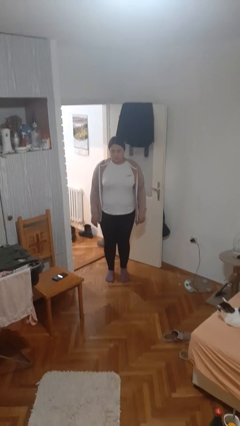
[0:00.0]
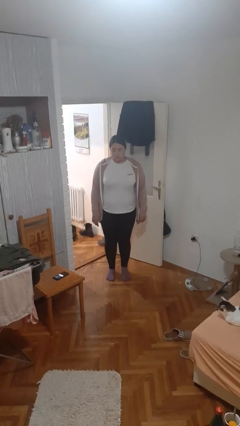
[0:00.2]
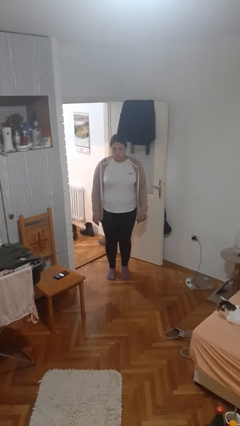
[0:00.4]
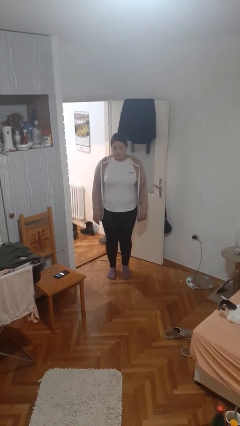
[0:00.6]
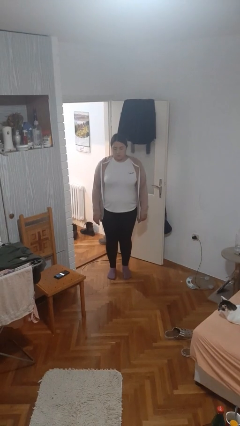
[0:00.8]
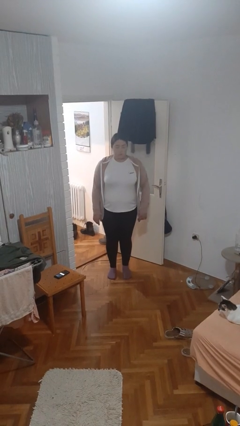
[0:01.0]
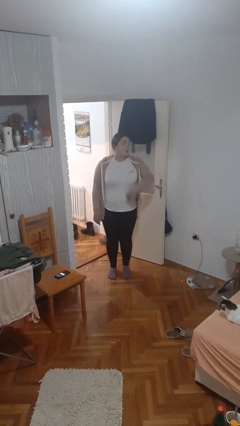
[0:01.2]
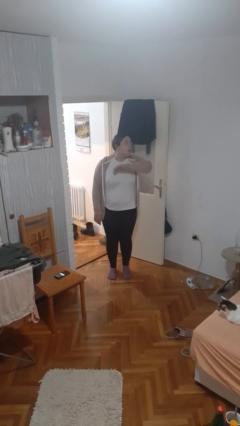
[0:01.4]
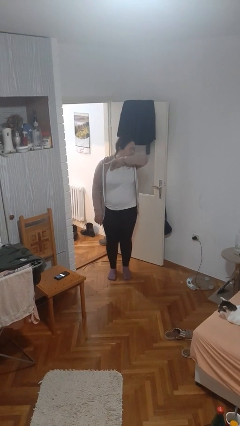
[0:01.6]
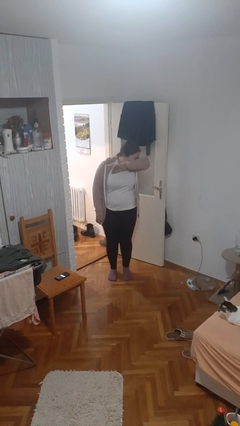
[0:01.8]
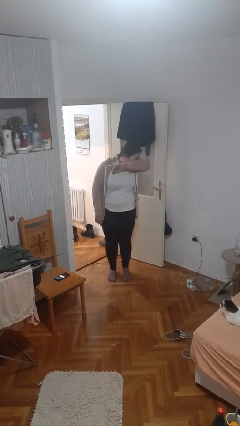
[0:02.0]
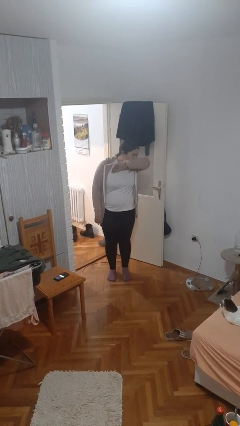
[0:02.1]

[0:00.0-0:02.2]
person sneezes into arm

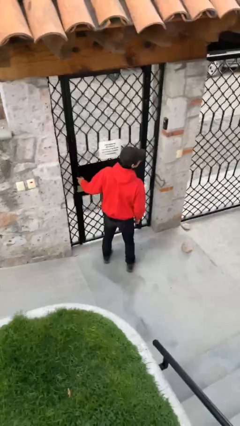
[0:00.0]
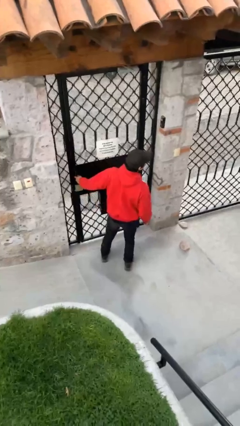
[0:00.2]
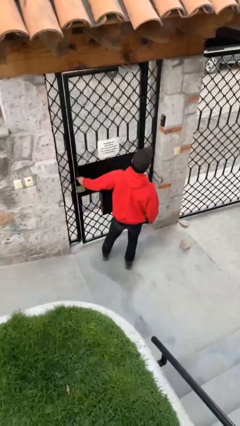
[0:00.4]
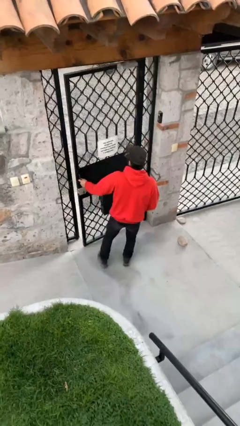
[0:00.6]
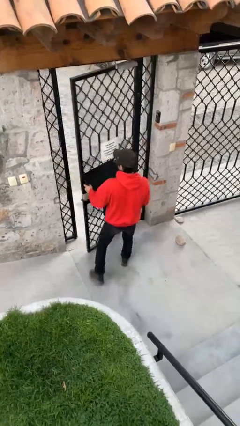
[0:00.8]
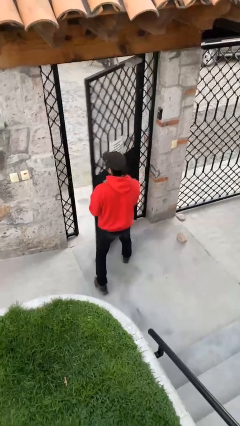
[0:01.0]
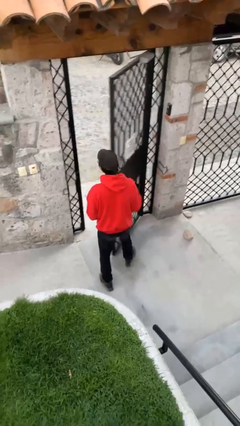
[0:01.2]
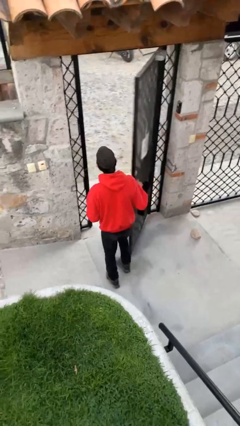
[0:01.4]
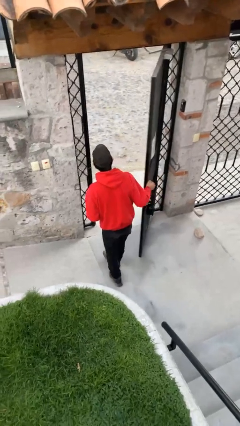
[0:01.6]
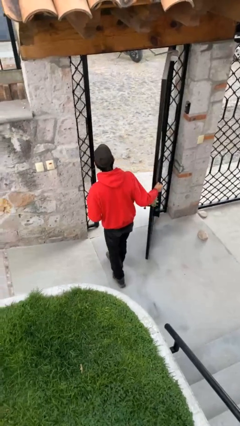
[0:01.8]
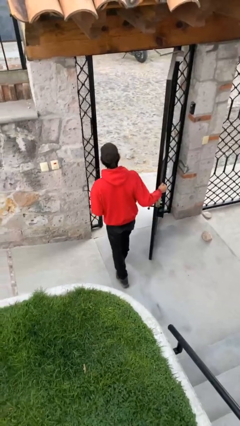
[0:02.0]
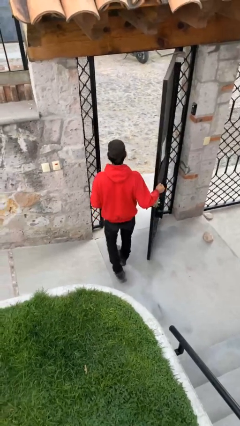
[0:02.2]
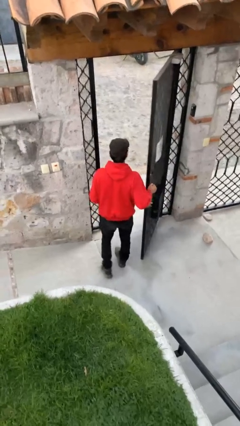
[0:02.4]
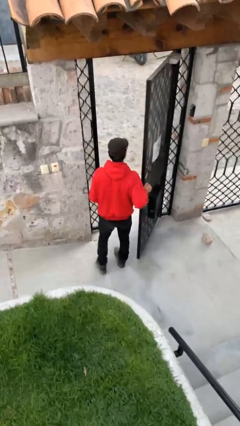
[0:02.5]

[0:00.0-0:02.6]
person opens facility door

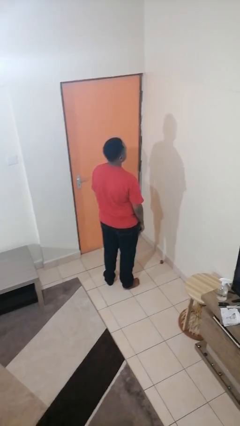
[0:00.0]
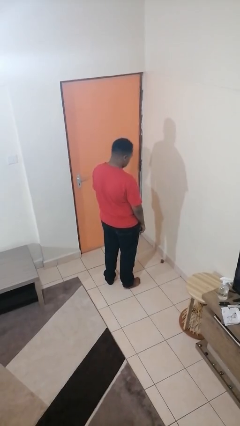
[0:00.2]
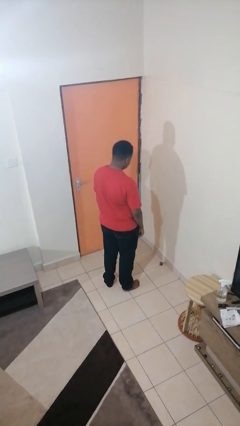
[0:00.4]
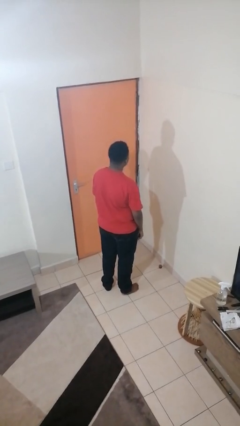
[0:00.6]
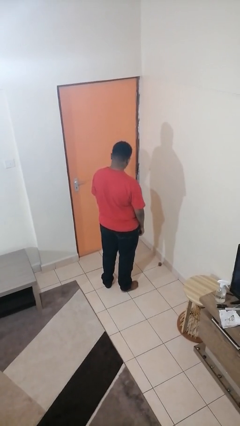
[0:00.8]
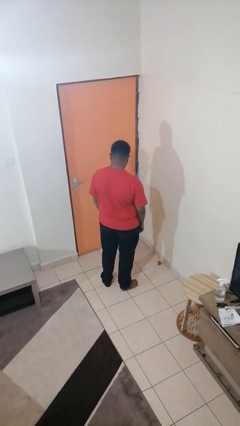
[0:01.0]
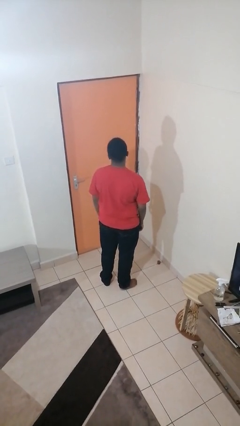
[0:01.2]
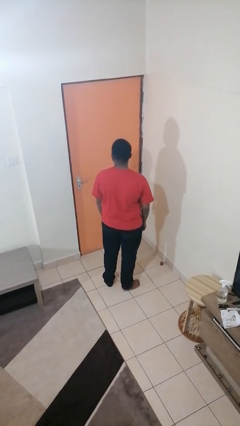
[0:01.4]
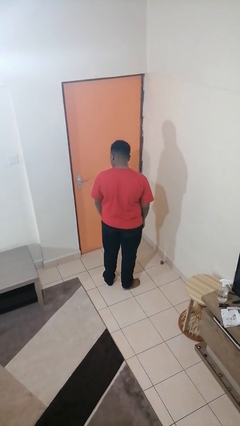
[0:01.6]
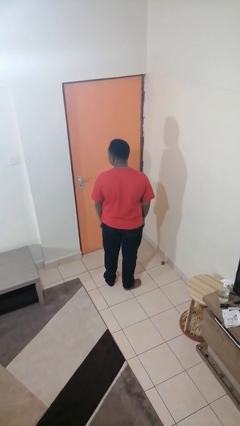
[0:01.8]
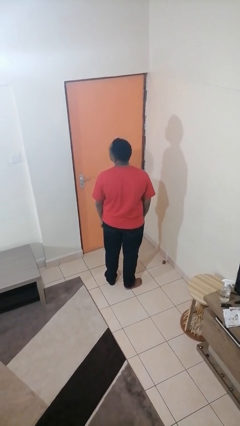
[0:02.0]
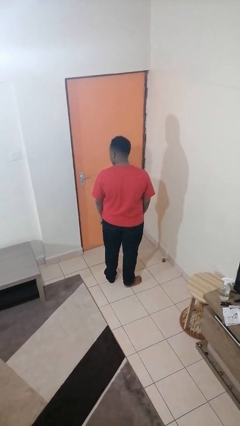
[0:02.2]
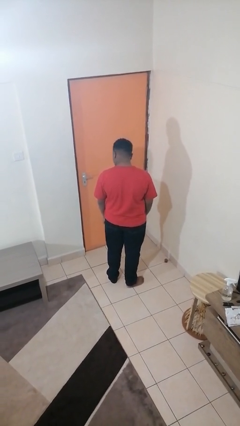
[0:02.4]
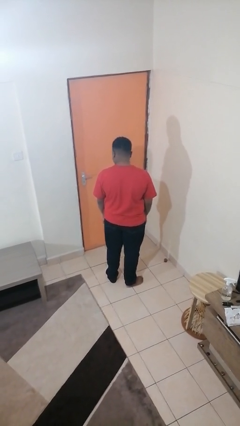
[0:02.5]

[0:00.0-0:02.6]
person nods head

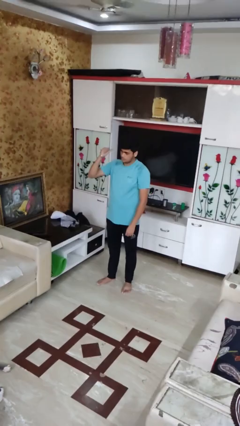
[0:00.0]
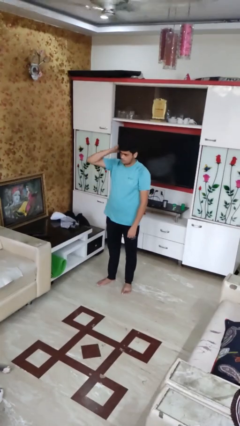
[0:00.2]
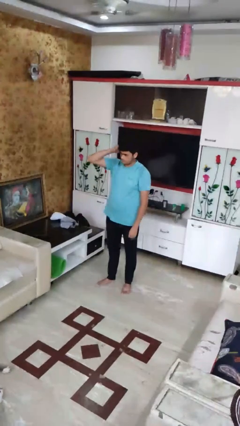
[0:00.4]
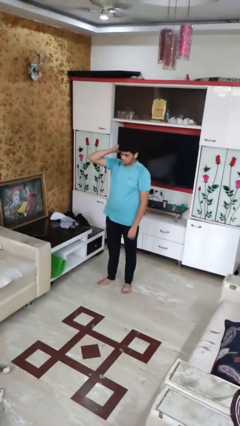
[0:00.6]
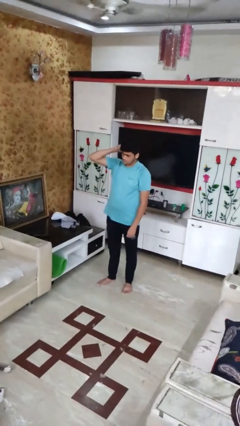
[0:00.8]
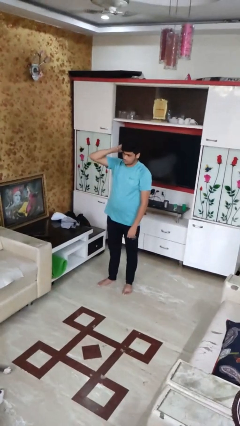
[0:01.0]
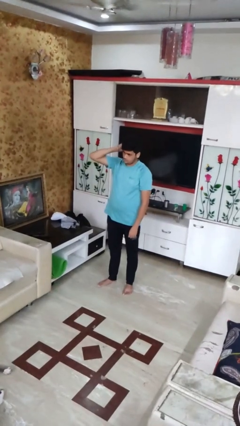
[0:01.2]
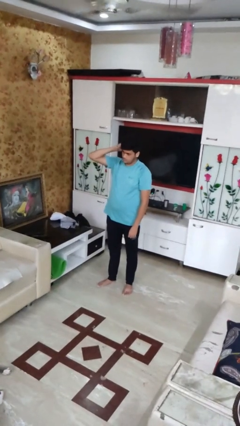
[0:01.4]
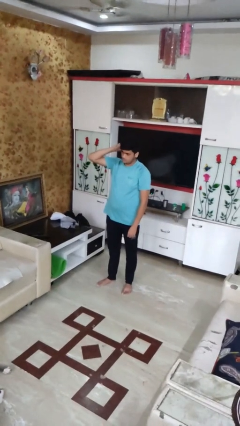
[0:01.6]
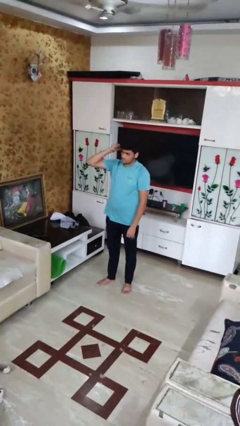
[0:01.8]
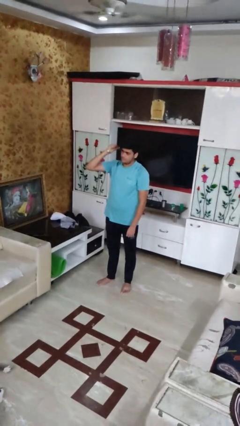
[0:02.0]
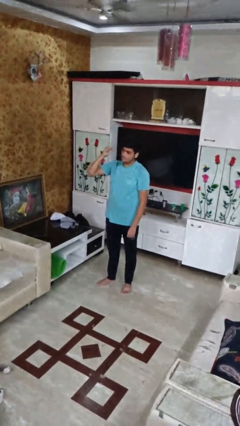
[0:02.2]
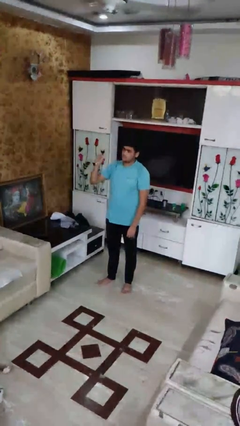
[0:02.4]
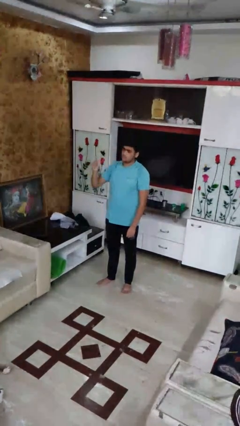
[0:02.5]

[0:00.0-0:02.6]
person gestures behind me

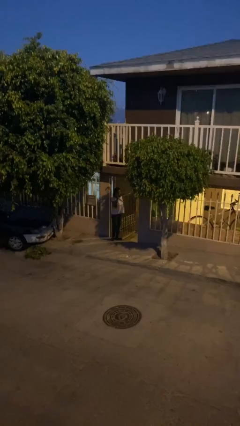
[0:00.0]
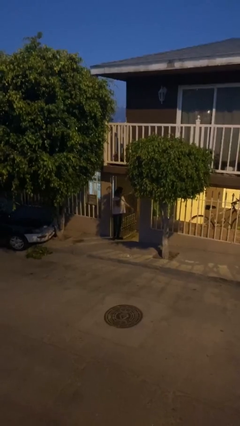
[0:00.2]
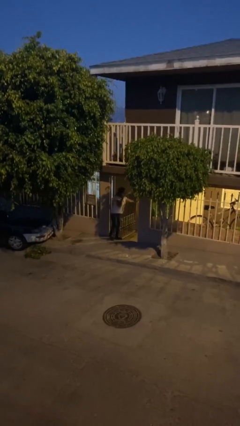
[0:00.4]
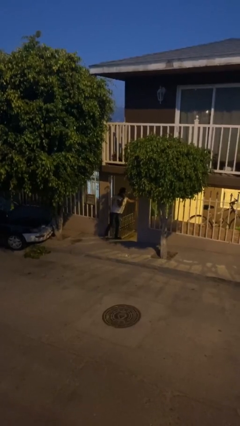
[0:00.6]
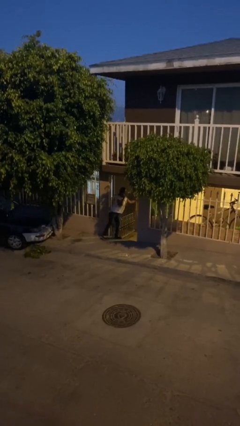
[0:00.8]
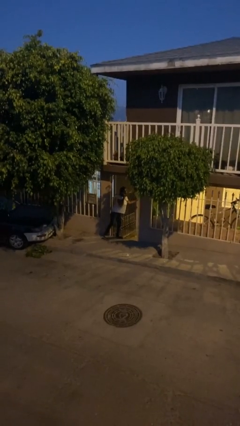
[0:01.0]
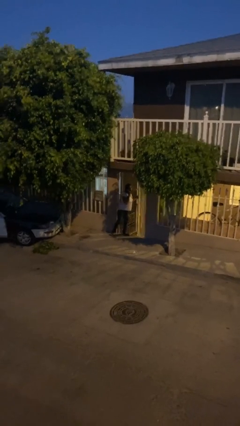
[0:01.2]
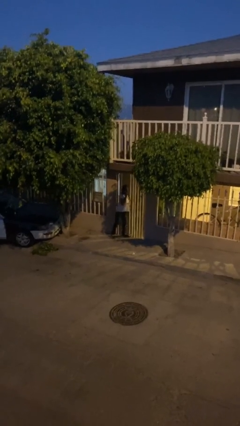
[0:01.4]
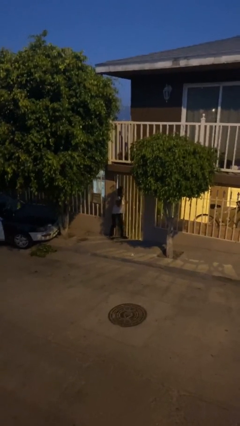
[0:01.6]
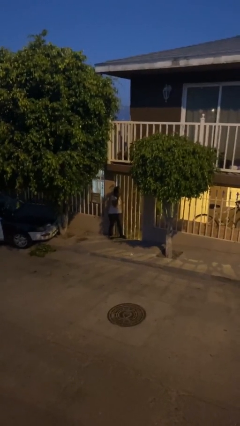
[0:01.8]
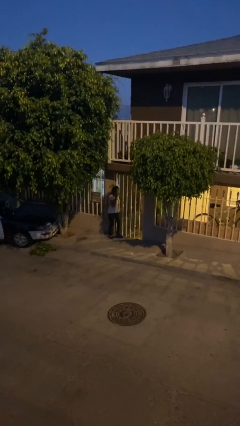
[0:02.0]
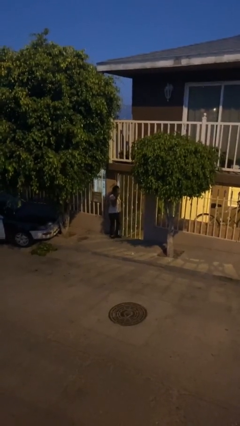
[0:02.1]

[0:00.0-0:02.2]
person closes facility door

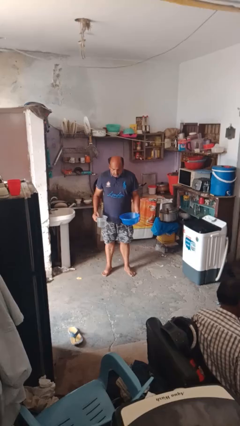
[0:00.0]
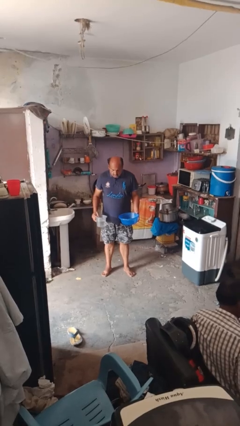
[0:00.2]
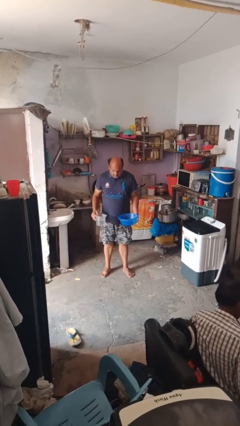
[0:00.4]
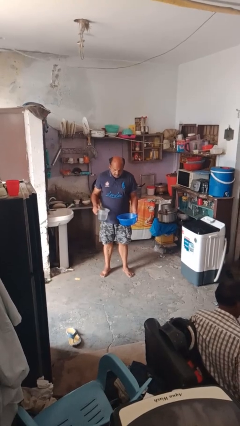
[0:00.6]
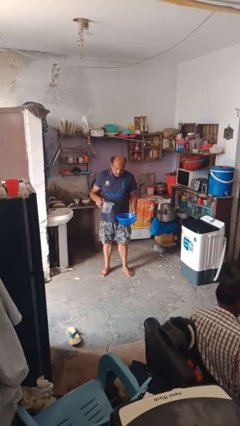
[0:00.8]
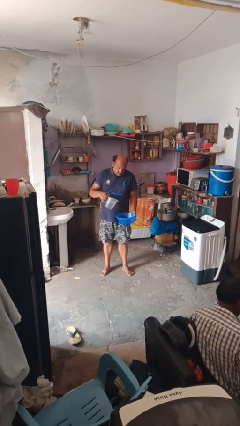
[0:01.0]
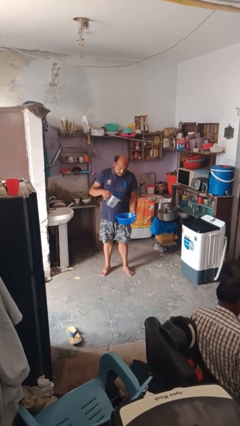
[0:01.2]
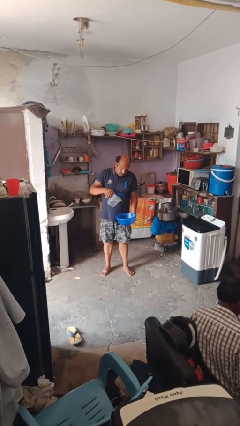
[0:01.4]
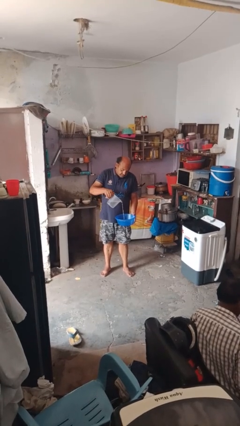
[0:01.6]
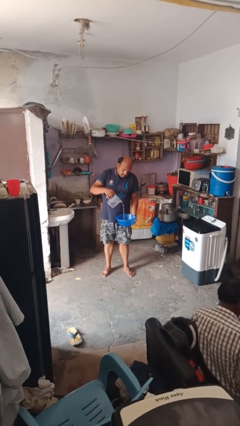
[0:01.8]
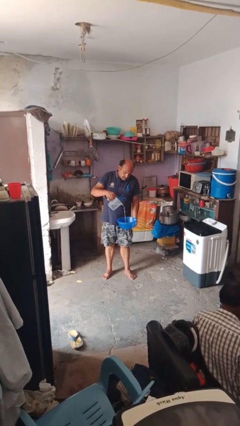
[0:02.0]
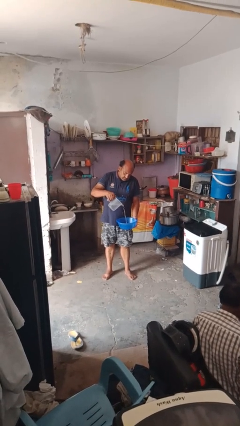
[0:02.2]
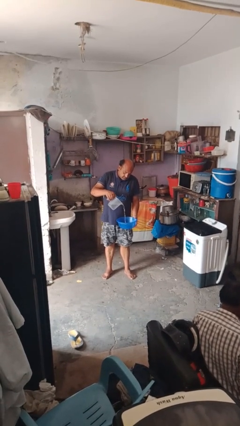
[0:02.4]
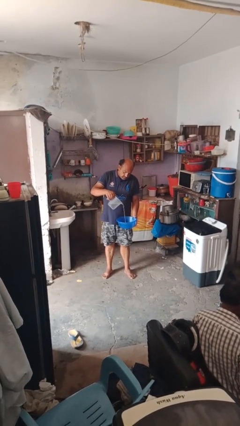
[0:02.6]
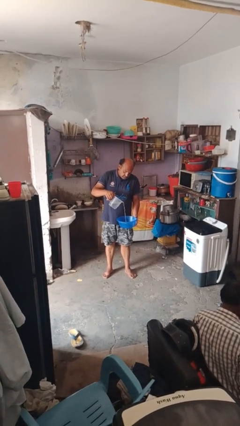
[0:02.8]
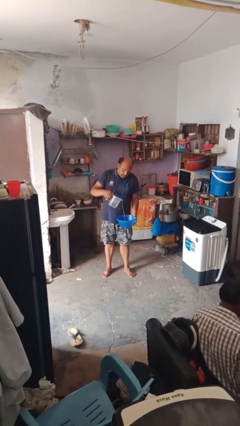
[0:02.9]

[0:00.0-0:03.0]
person pours into bowl

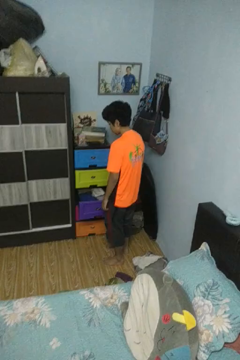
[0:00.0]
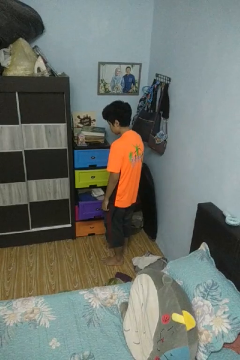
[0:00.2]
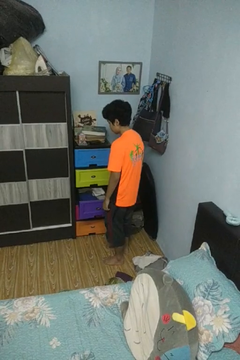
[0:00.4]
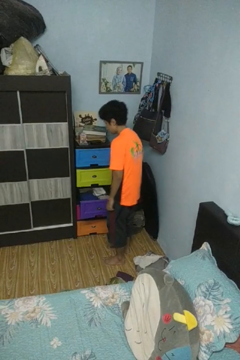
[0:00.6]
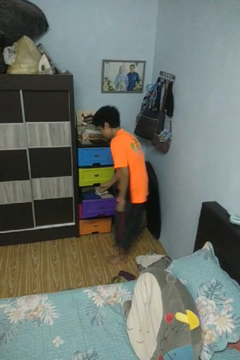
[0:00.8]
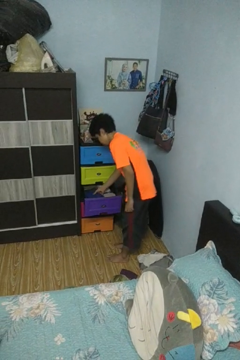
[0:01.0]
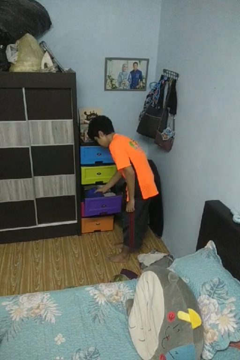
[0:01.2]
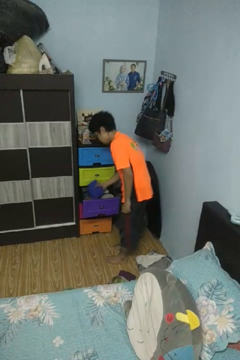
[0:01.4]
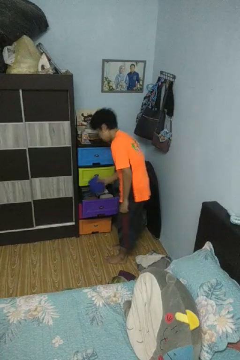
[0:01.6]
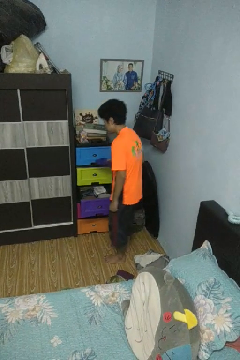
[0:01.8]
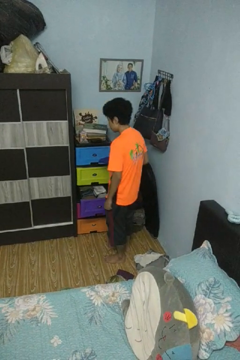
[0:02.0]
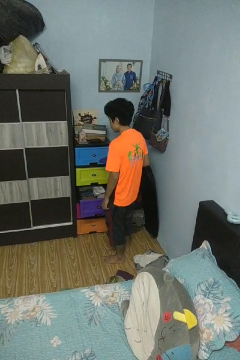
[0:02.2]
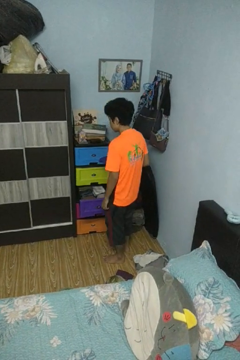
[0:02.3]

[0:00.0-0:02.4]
person takes clothes from dresser
